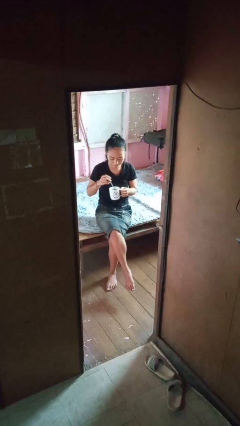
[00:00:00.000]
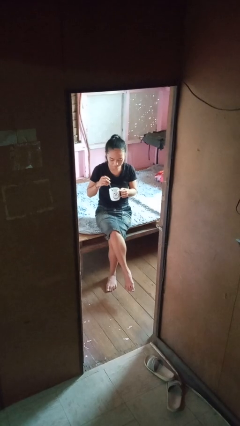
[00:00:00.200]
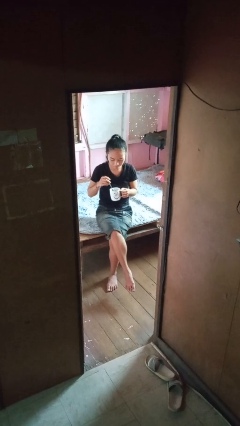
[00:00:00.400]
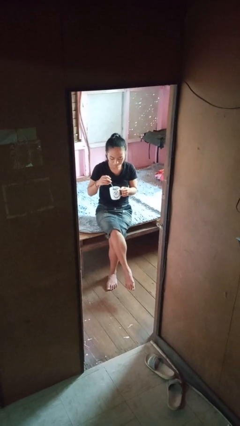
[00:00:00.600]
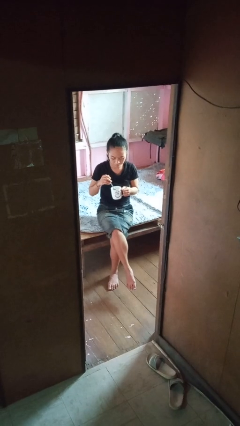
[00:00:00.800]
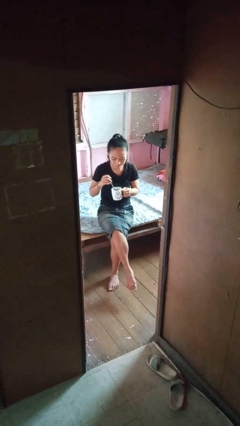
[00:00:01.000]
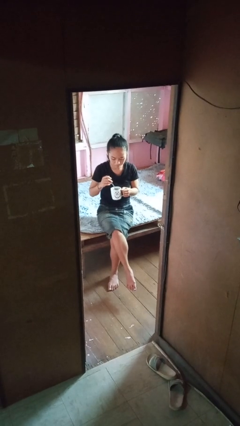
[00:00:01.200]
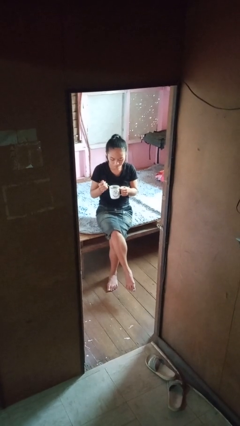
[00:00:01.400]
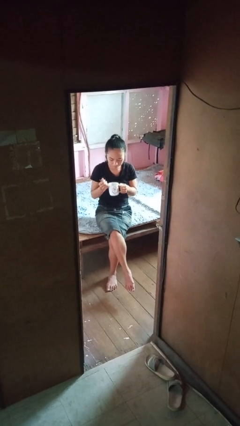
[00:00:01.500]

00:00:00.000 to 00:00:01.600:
person stirs mug

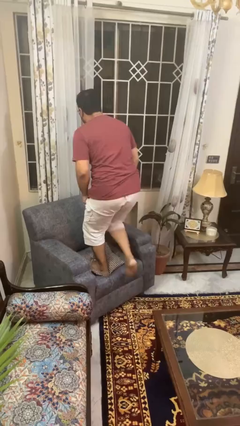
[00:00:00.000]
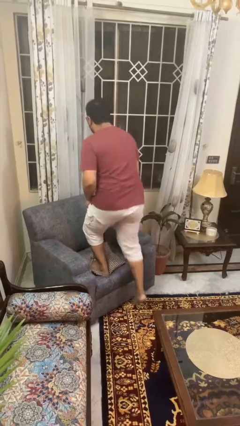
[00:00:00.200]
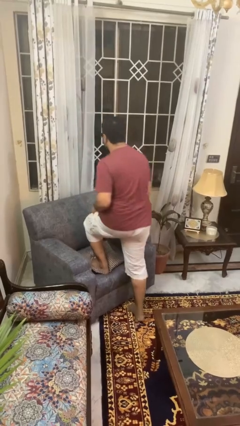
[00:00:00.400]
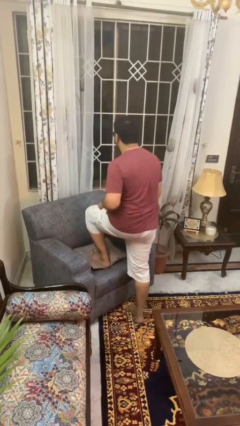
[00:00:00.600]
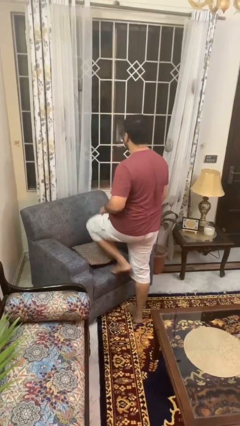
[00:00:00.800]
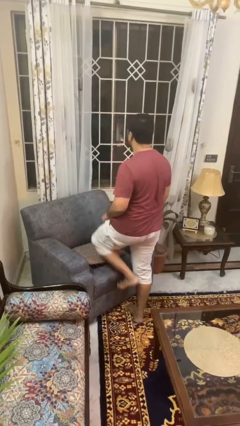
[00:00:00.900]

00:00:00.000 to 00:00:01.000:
person climbs off couch

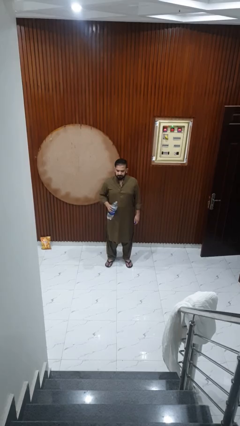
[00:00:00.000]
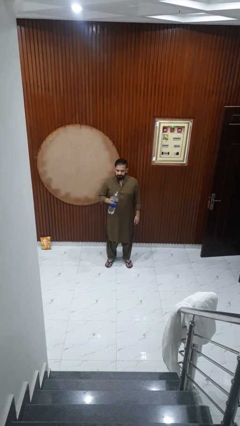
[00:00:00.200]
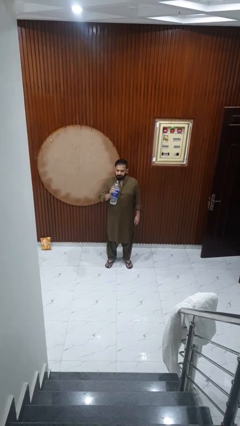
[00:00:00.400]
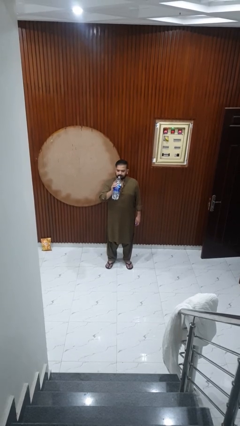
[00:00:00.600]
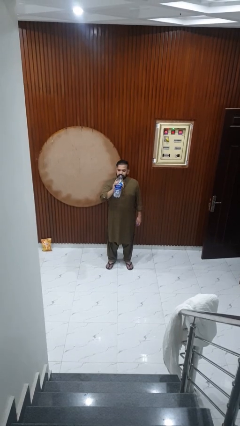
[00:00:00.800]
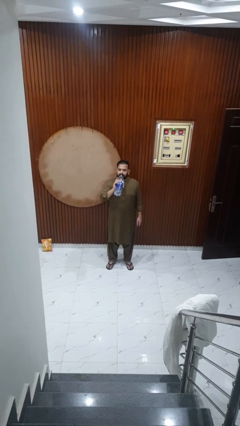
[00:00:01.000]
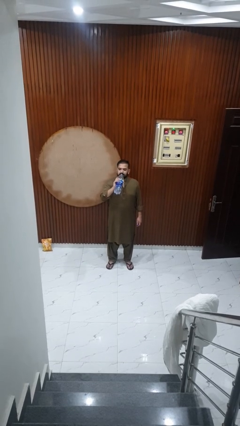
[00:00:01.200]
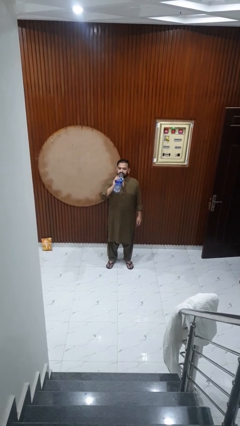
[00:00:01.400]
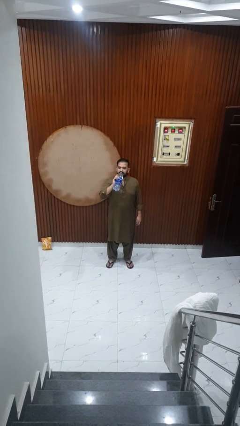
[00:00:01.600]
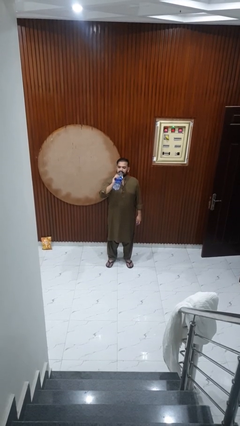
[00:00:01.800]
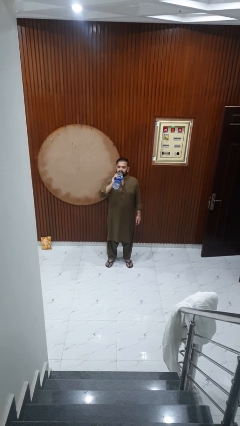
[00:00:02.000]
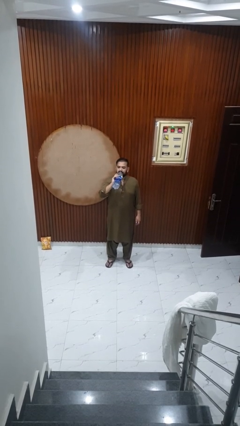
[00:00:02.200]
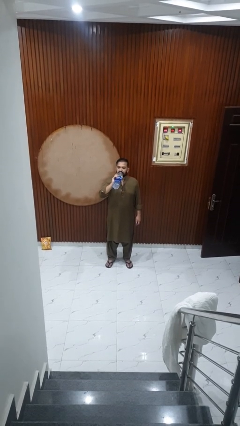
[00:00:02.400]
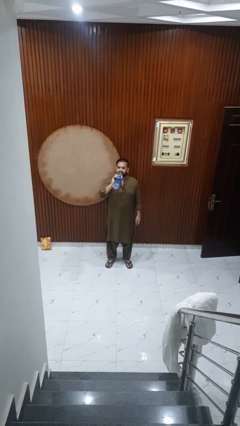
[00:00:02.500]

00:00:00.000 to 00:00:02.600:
person drinks from bottle

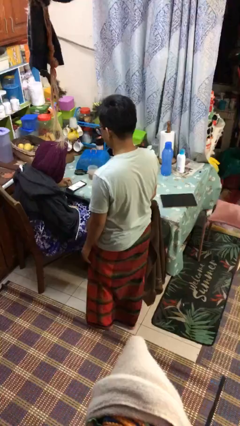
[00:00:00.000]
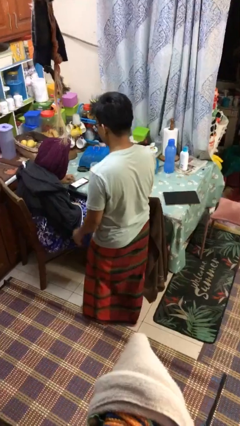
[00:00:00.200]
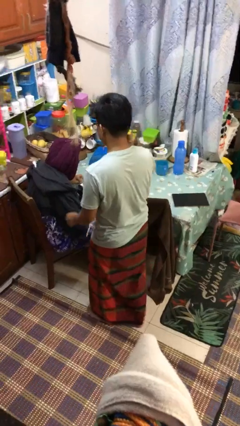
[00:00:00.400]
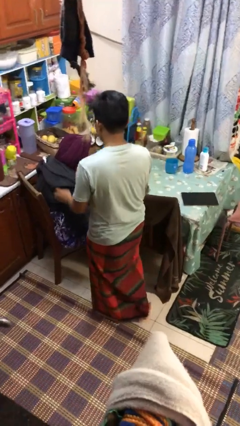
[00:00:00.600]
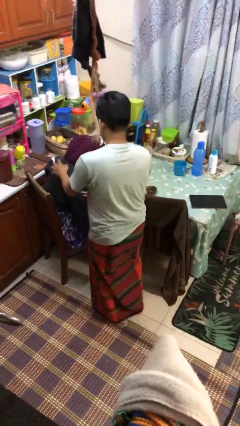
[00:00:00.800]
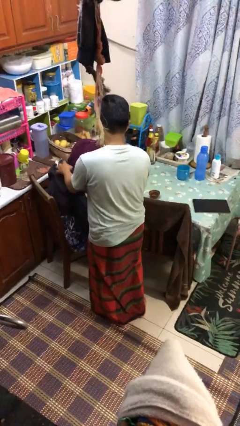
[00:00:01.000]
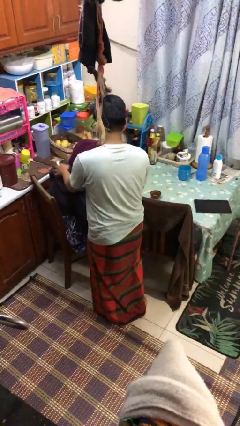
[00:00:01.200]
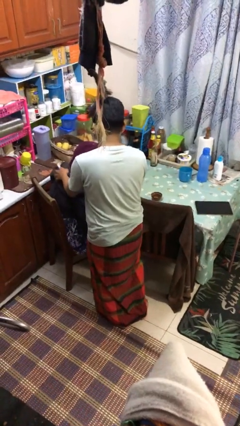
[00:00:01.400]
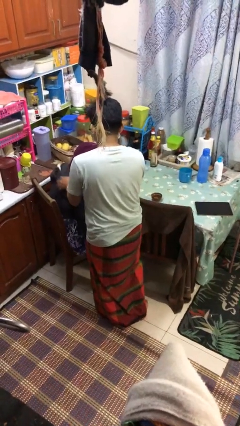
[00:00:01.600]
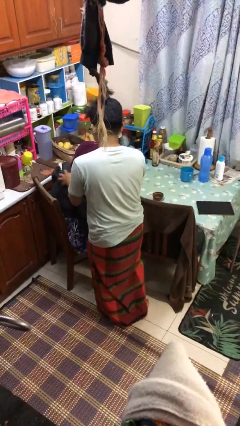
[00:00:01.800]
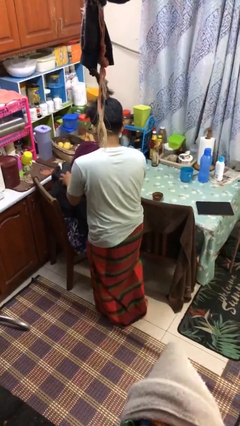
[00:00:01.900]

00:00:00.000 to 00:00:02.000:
person tickles person

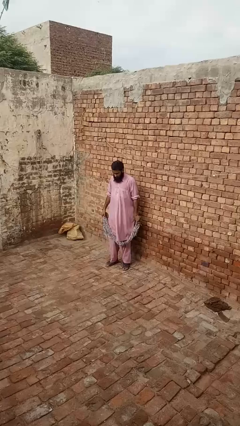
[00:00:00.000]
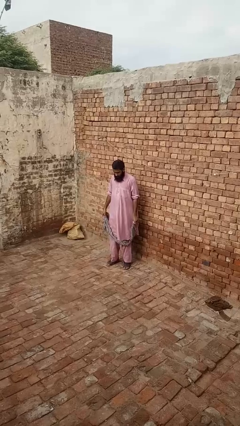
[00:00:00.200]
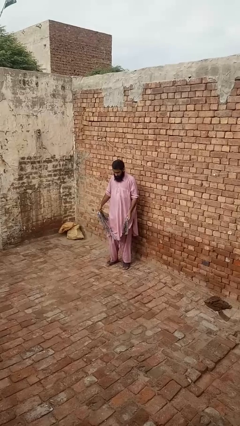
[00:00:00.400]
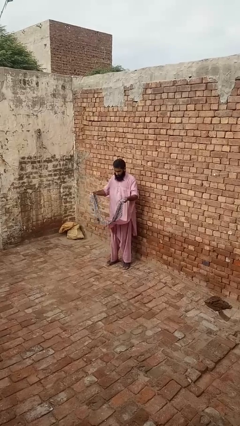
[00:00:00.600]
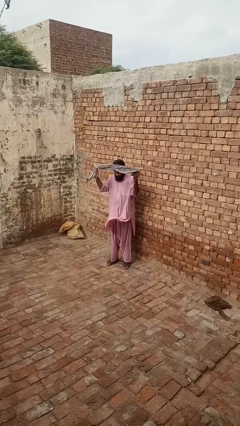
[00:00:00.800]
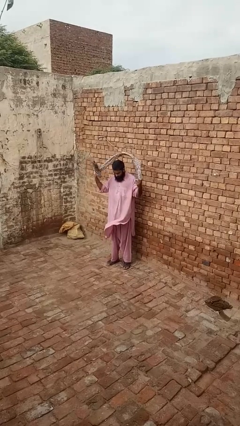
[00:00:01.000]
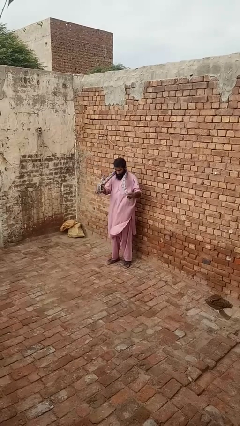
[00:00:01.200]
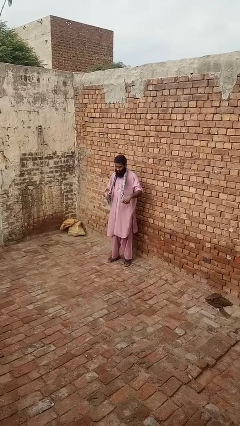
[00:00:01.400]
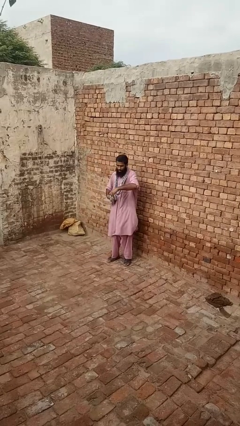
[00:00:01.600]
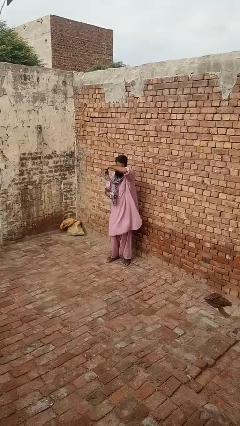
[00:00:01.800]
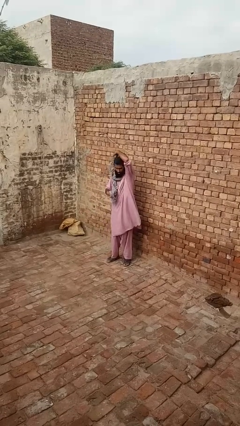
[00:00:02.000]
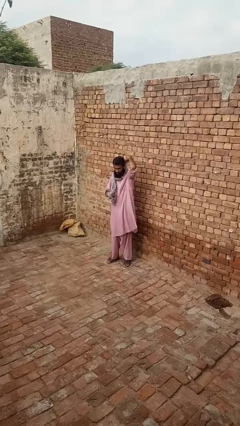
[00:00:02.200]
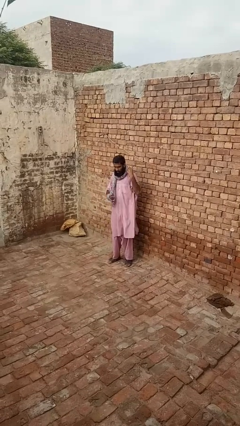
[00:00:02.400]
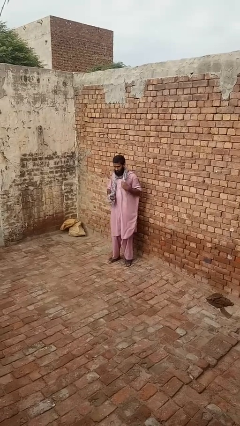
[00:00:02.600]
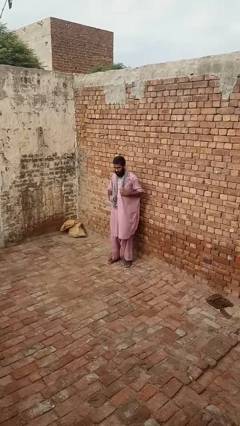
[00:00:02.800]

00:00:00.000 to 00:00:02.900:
person puts on scarf

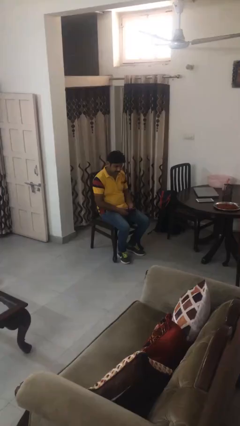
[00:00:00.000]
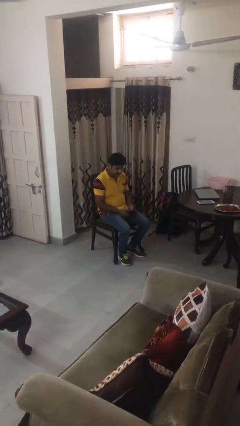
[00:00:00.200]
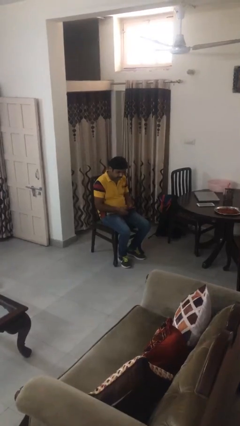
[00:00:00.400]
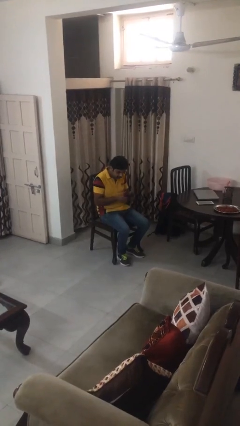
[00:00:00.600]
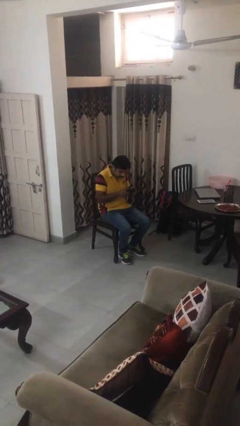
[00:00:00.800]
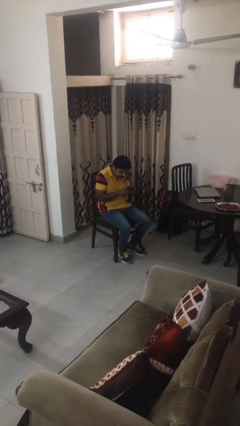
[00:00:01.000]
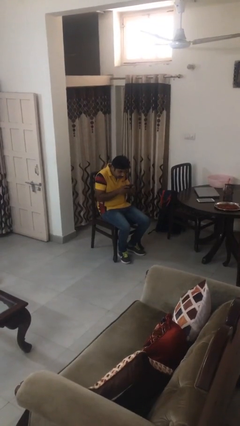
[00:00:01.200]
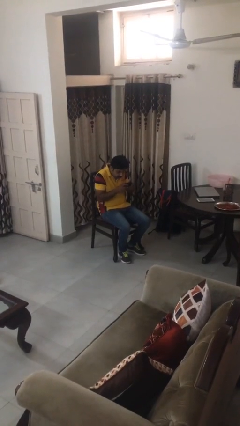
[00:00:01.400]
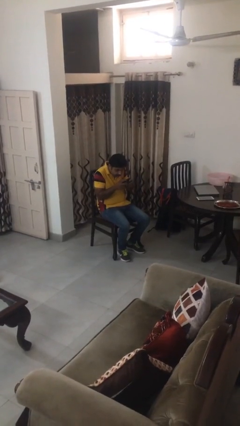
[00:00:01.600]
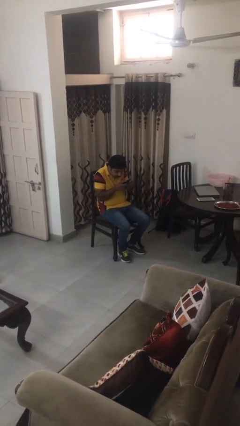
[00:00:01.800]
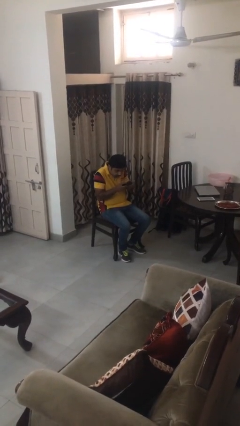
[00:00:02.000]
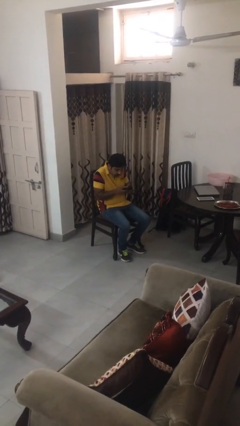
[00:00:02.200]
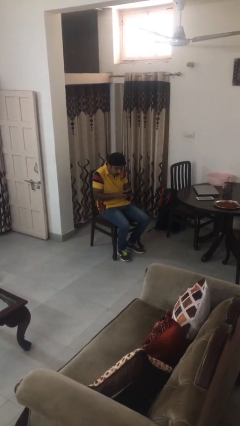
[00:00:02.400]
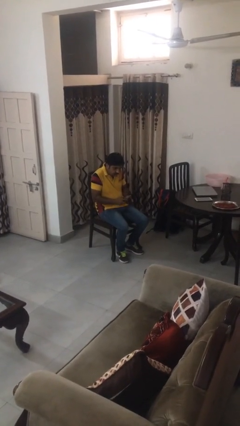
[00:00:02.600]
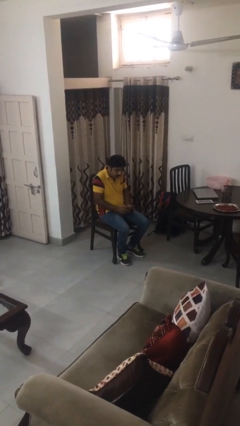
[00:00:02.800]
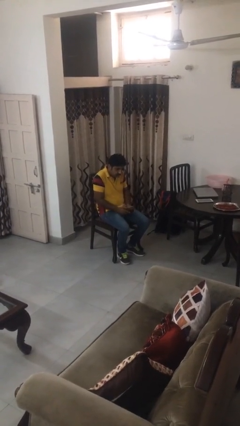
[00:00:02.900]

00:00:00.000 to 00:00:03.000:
person interacts with handheld game

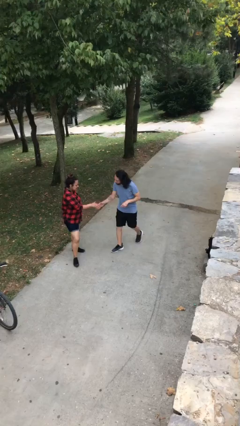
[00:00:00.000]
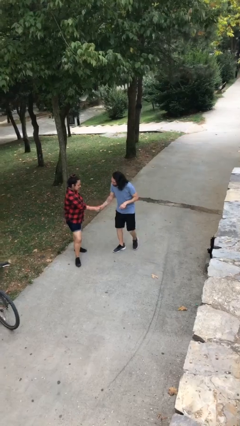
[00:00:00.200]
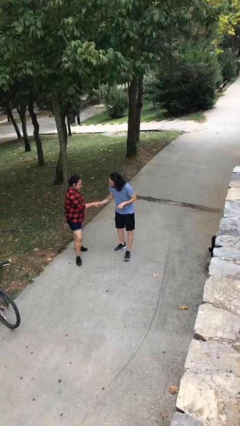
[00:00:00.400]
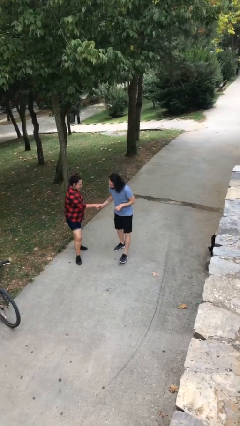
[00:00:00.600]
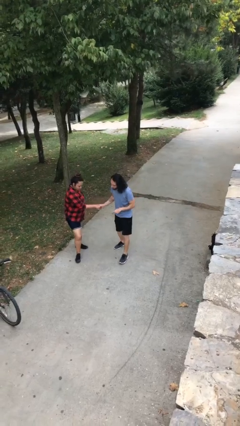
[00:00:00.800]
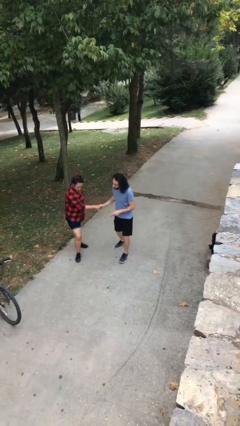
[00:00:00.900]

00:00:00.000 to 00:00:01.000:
person shakes hand

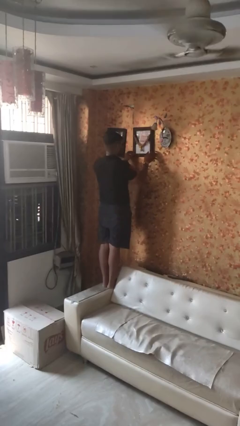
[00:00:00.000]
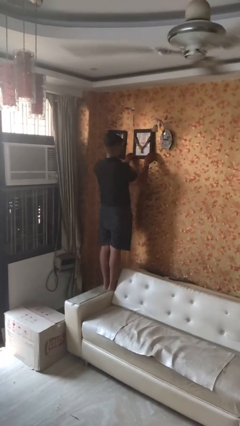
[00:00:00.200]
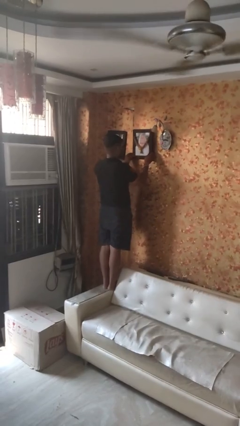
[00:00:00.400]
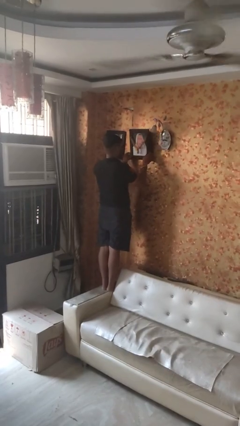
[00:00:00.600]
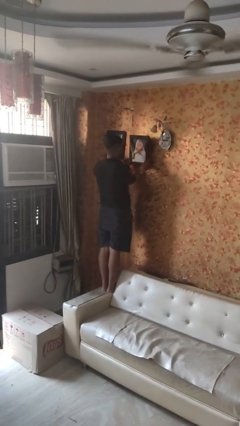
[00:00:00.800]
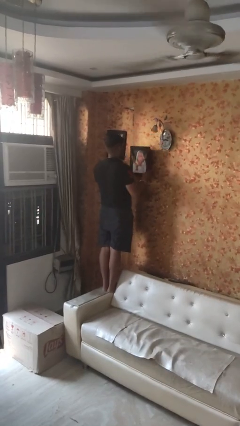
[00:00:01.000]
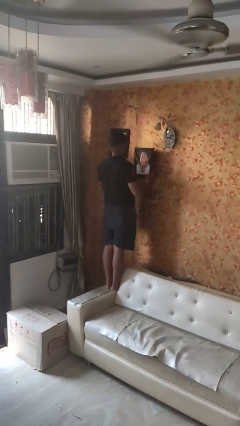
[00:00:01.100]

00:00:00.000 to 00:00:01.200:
person takes down picture frame

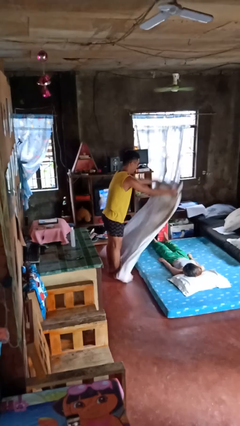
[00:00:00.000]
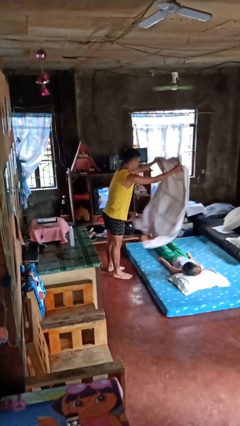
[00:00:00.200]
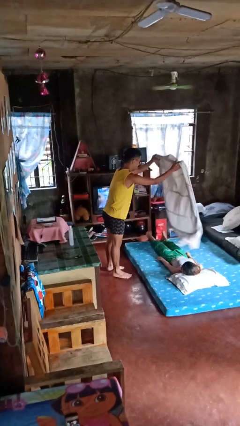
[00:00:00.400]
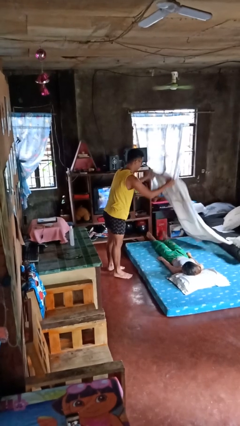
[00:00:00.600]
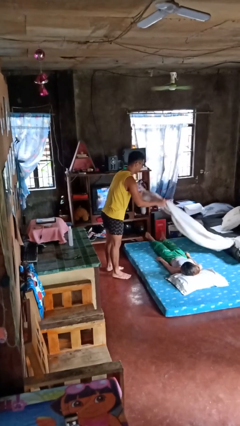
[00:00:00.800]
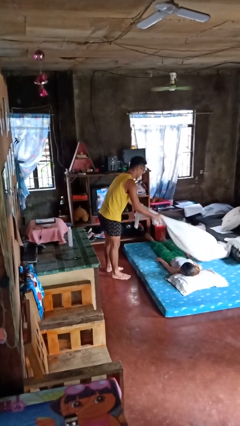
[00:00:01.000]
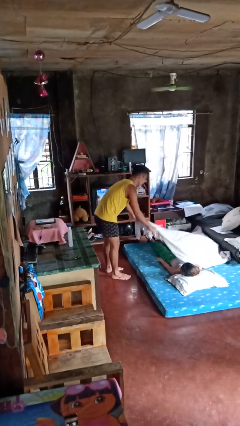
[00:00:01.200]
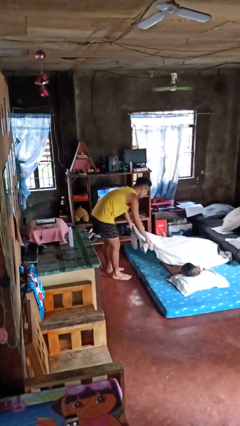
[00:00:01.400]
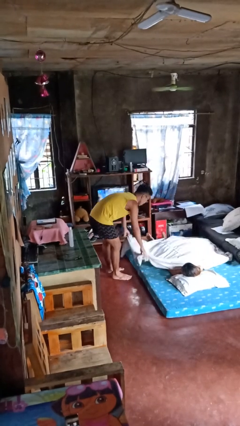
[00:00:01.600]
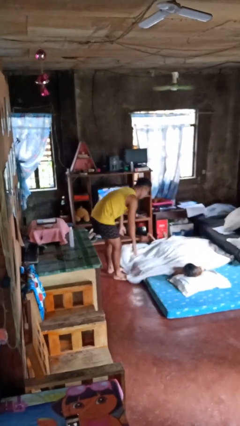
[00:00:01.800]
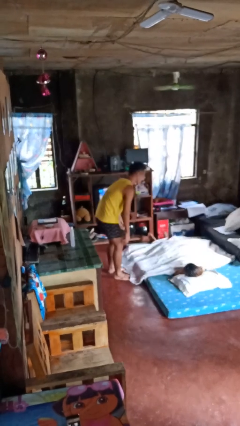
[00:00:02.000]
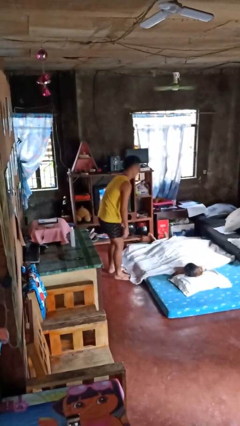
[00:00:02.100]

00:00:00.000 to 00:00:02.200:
person covers friend with blanket
